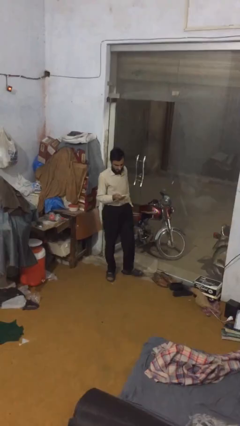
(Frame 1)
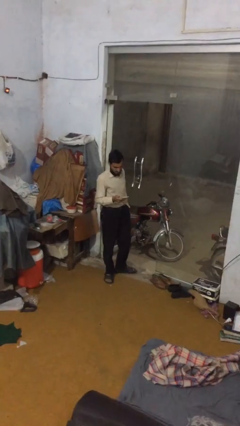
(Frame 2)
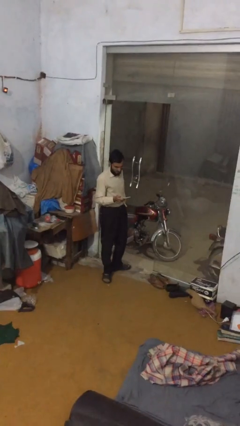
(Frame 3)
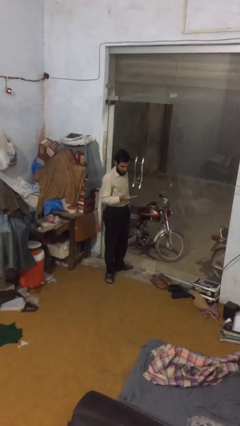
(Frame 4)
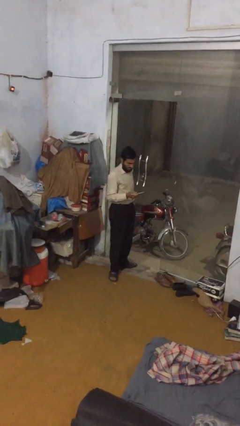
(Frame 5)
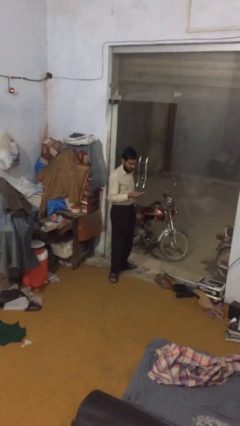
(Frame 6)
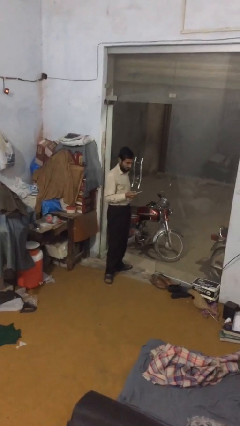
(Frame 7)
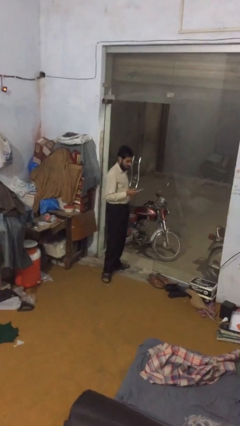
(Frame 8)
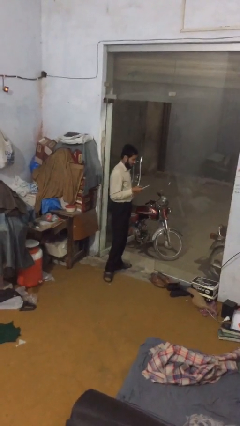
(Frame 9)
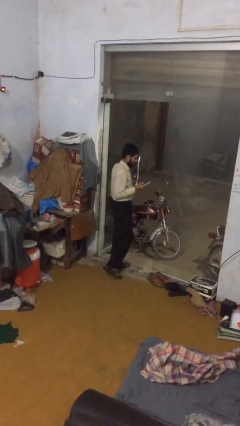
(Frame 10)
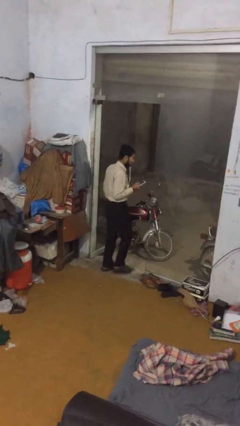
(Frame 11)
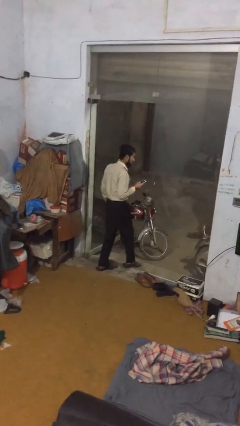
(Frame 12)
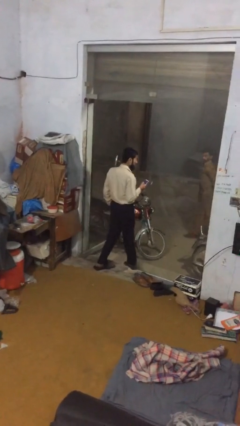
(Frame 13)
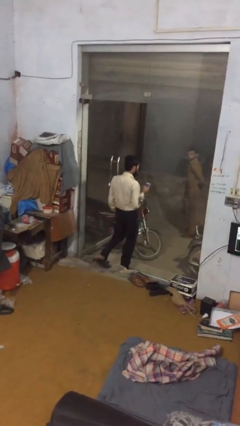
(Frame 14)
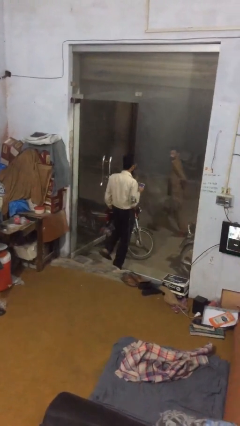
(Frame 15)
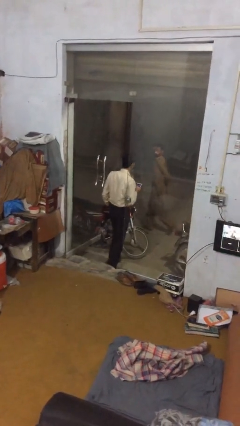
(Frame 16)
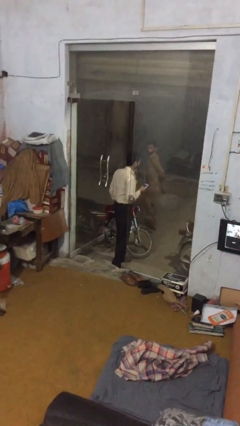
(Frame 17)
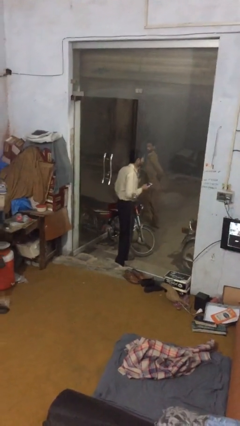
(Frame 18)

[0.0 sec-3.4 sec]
person exits scene through structure

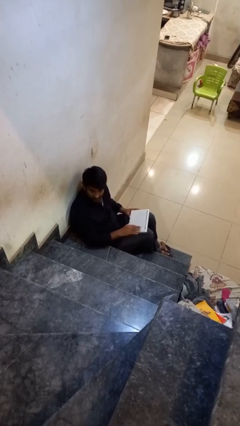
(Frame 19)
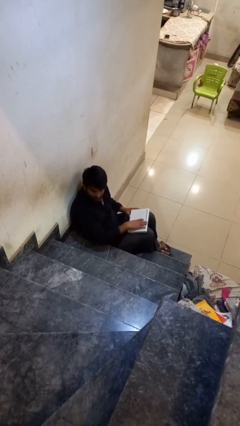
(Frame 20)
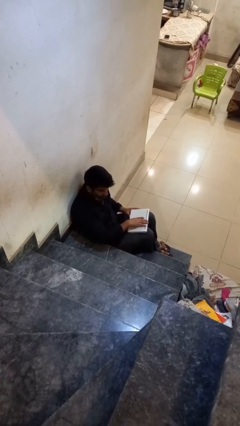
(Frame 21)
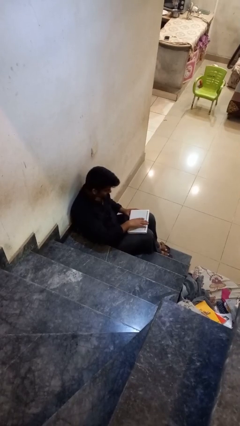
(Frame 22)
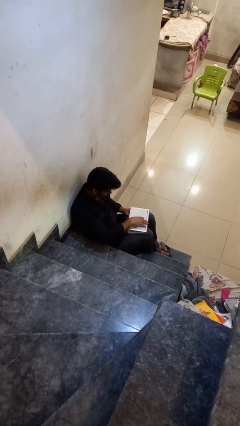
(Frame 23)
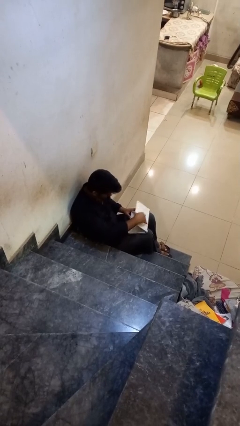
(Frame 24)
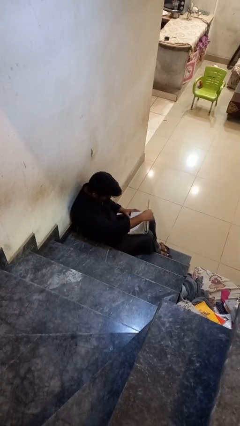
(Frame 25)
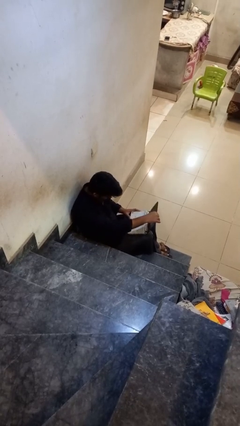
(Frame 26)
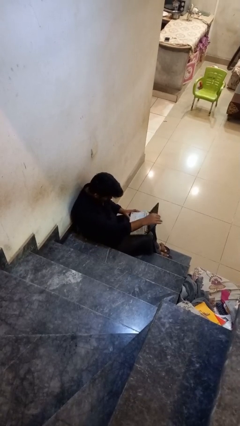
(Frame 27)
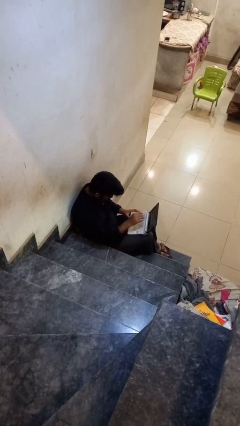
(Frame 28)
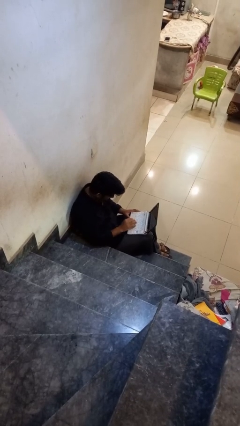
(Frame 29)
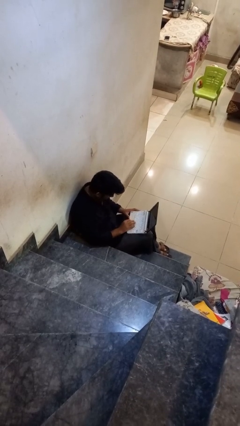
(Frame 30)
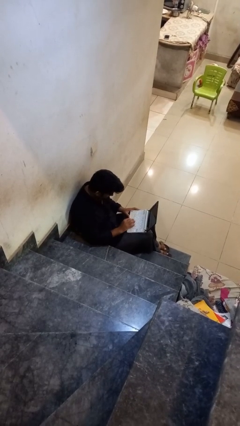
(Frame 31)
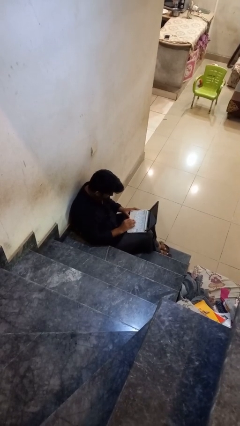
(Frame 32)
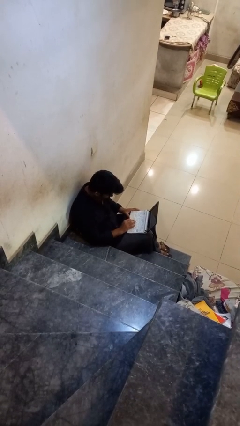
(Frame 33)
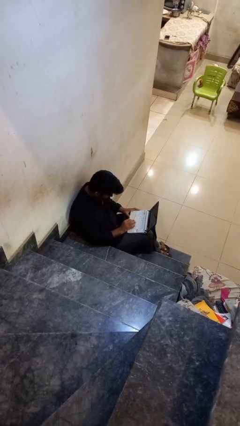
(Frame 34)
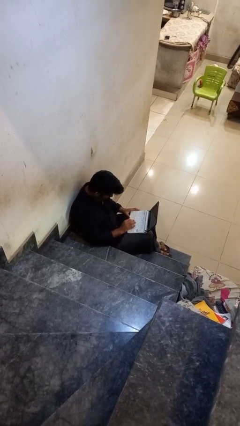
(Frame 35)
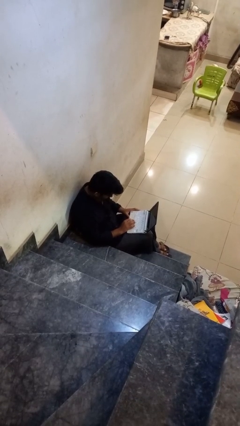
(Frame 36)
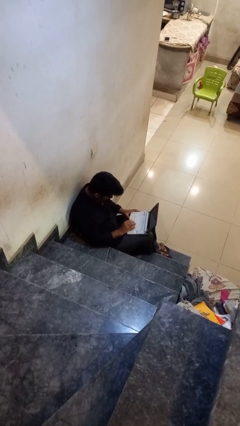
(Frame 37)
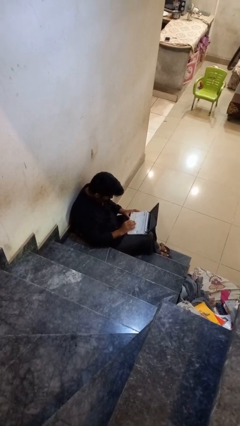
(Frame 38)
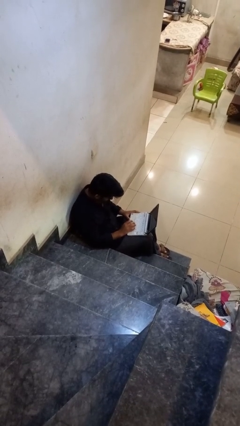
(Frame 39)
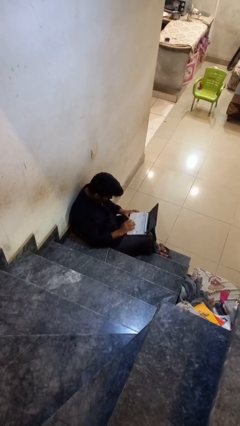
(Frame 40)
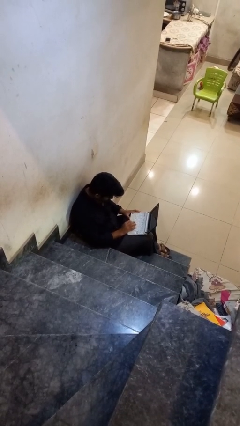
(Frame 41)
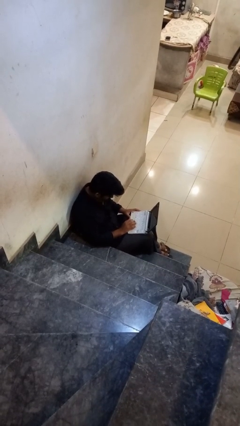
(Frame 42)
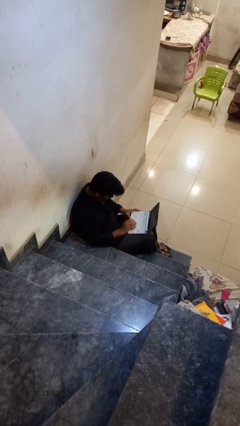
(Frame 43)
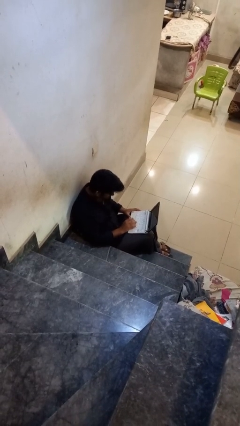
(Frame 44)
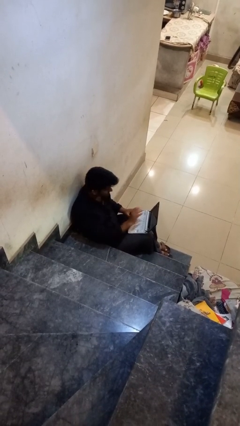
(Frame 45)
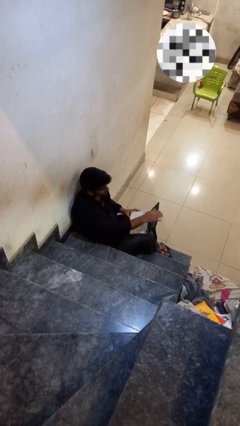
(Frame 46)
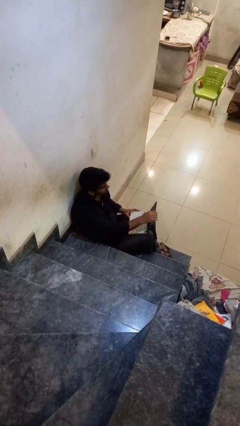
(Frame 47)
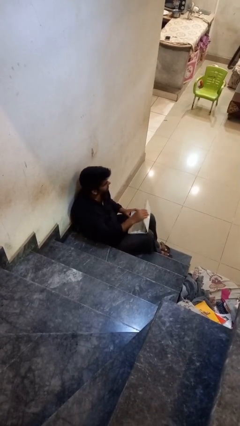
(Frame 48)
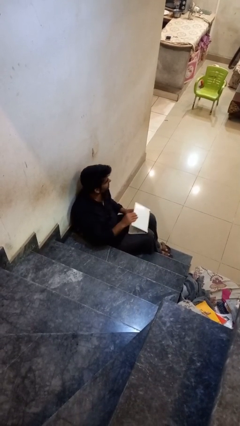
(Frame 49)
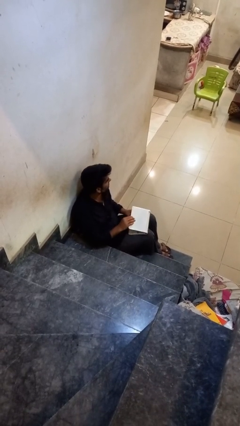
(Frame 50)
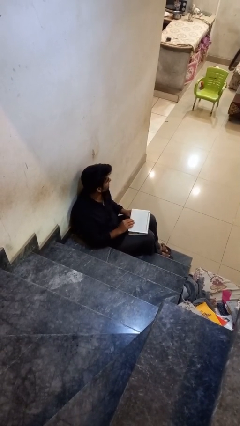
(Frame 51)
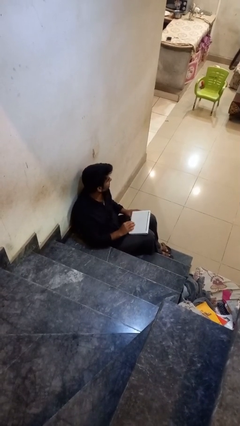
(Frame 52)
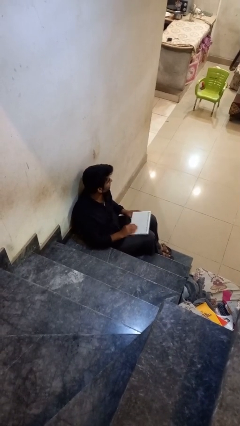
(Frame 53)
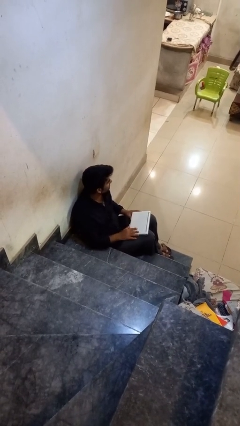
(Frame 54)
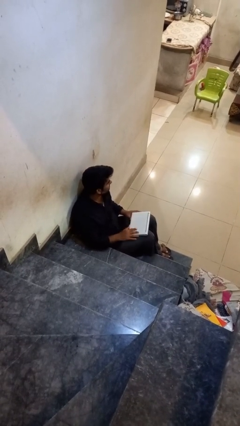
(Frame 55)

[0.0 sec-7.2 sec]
person interacts with laptop

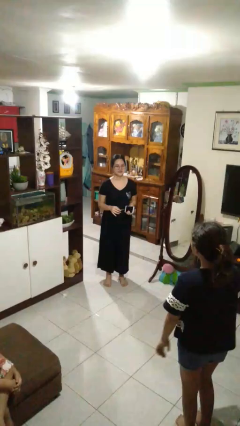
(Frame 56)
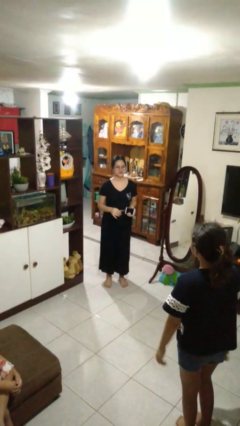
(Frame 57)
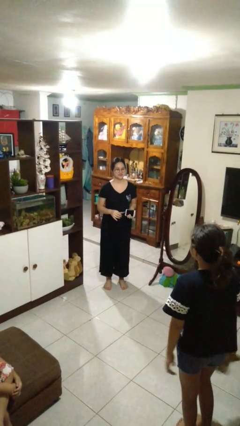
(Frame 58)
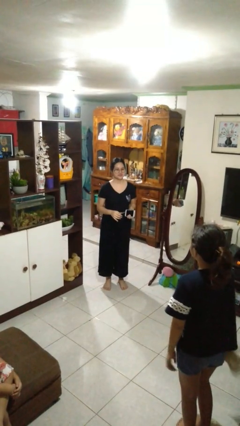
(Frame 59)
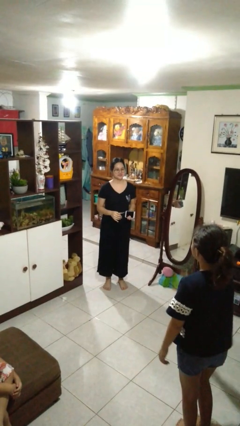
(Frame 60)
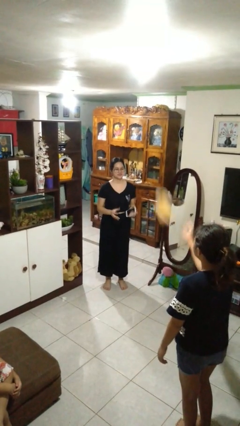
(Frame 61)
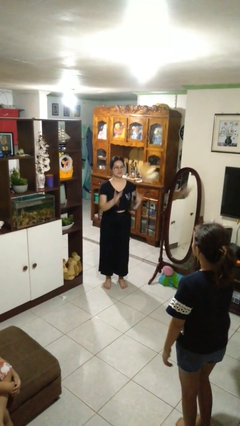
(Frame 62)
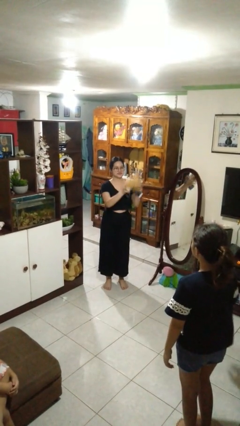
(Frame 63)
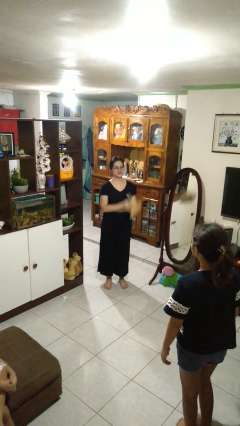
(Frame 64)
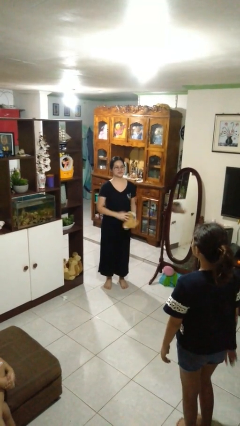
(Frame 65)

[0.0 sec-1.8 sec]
person catches object from person

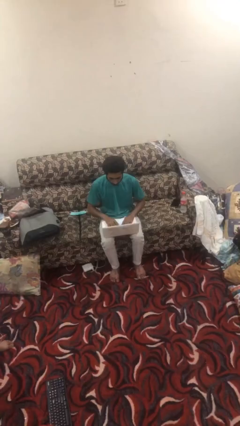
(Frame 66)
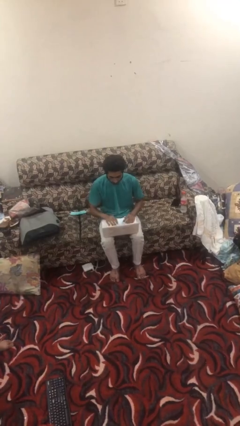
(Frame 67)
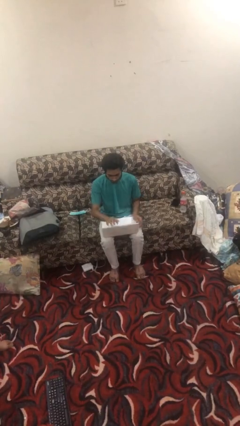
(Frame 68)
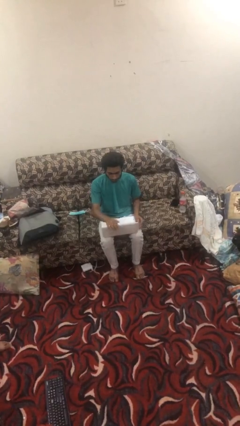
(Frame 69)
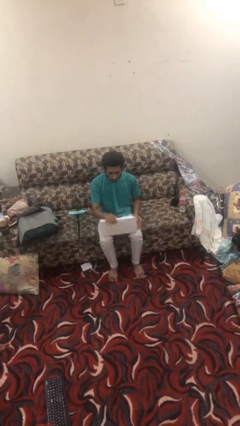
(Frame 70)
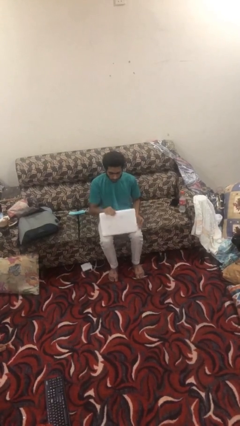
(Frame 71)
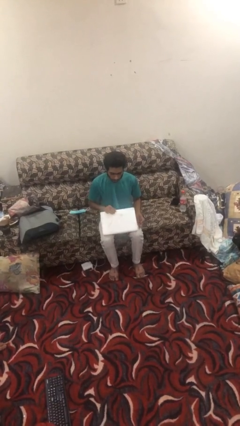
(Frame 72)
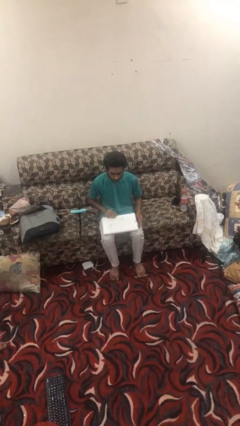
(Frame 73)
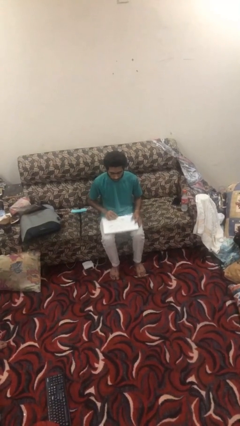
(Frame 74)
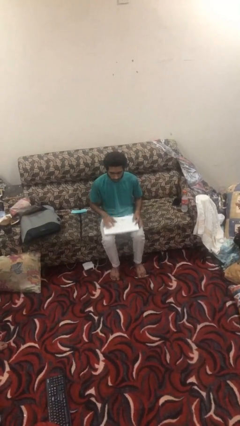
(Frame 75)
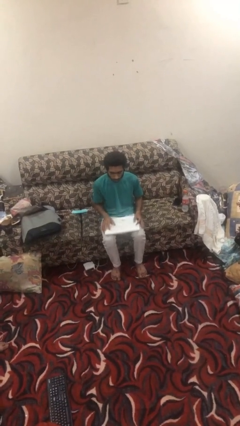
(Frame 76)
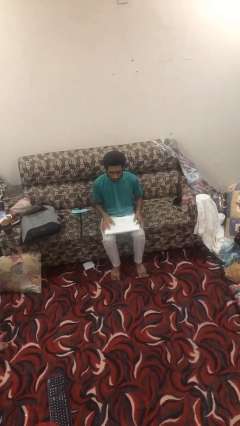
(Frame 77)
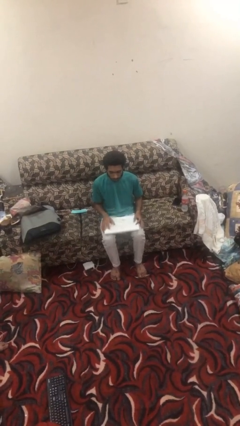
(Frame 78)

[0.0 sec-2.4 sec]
person closes laptop

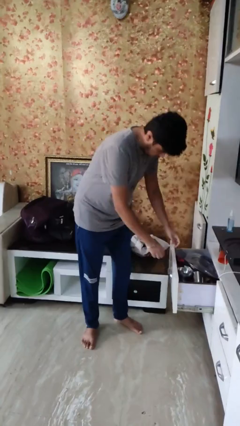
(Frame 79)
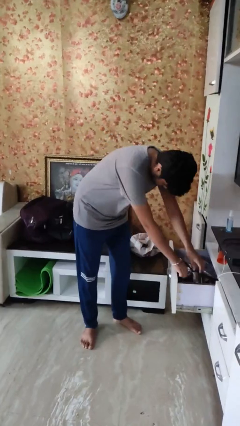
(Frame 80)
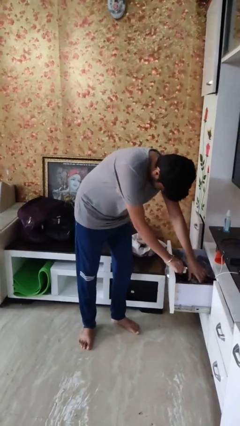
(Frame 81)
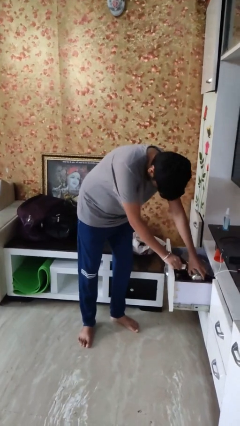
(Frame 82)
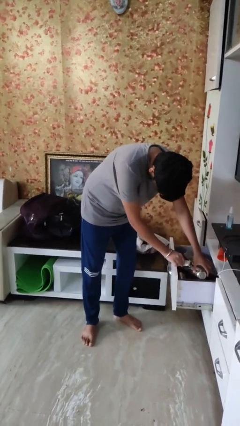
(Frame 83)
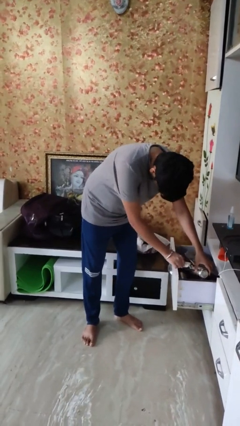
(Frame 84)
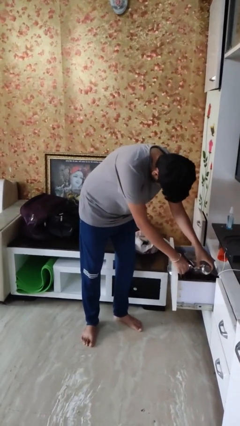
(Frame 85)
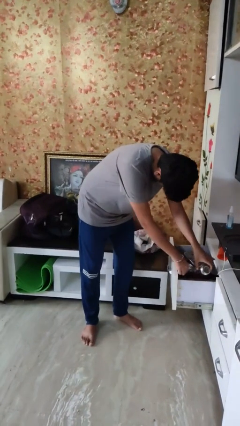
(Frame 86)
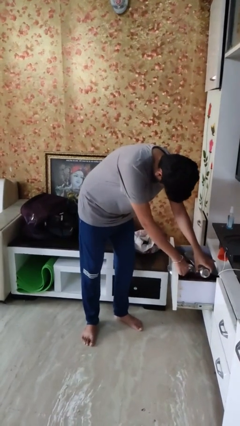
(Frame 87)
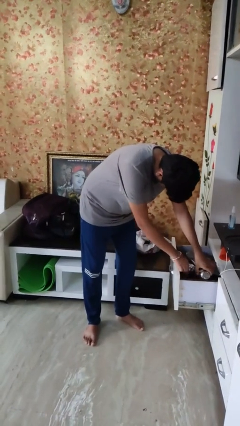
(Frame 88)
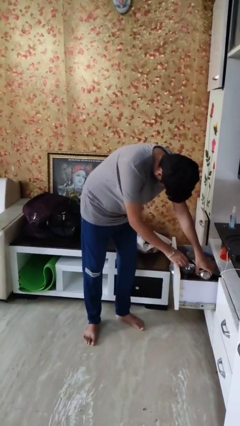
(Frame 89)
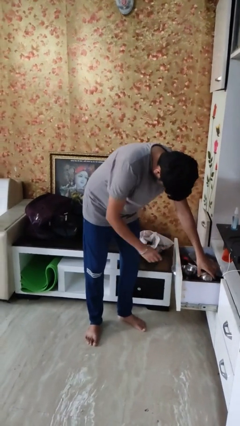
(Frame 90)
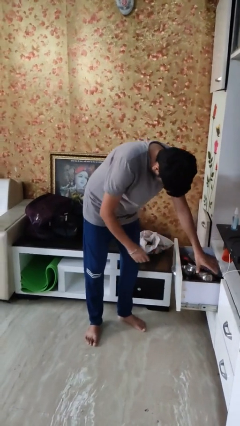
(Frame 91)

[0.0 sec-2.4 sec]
person searches in kitchen drawer

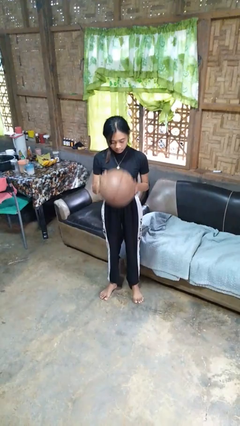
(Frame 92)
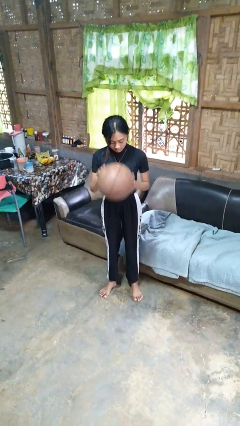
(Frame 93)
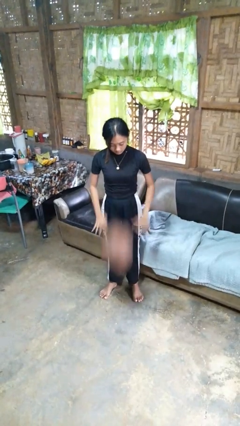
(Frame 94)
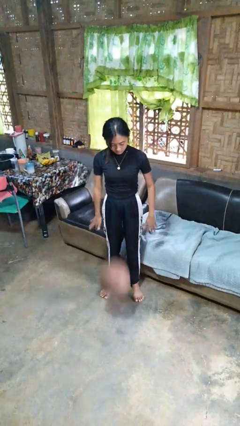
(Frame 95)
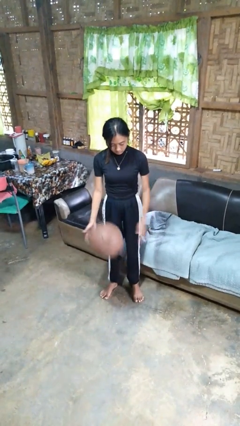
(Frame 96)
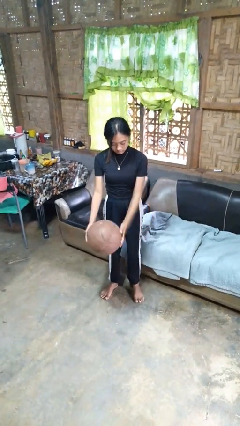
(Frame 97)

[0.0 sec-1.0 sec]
person bounces ball on floor
